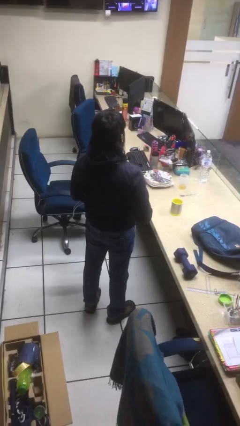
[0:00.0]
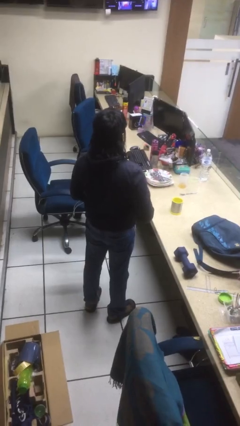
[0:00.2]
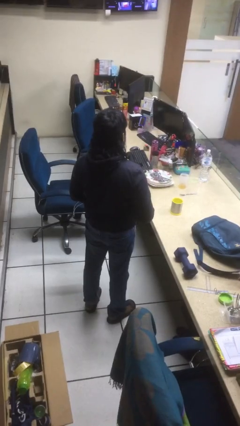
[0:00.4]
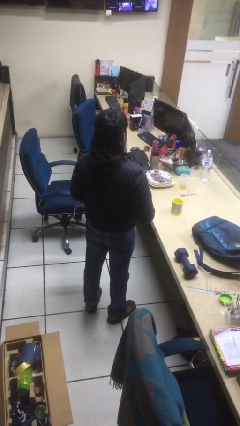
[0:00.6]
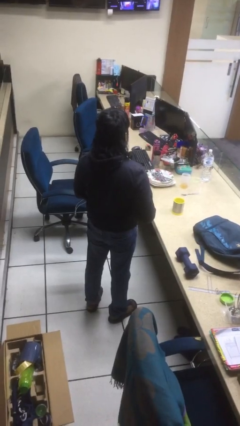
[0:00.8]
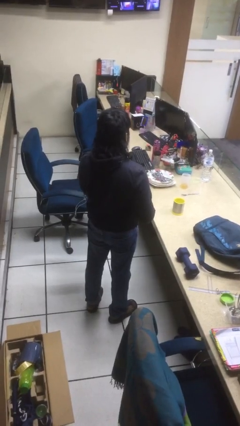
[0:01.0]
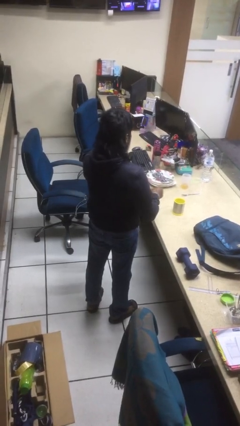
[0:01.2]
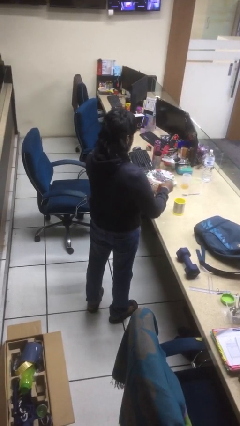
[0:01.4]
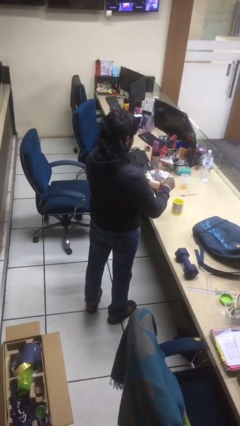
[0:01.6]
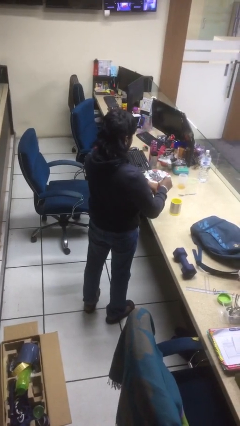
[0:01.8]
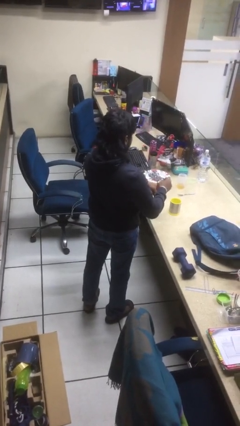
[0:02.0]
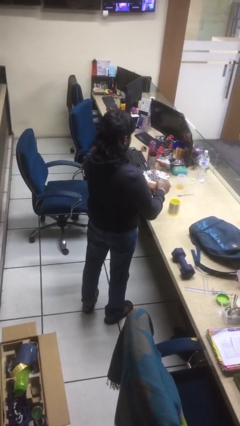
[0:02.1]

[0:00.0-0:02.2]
person opens beverage can

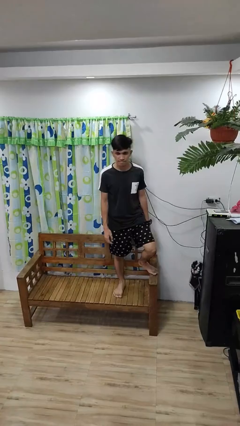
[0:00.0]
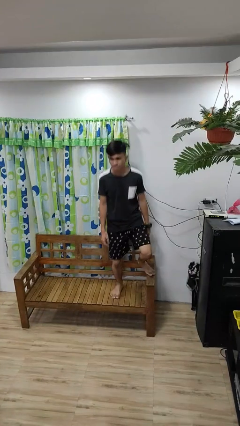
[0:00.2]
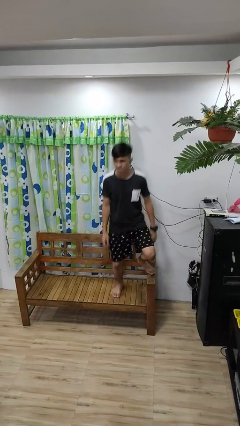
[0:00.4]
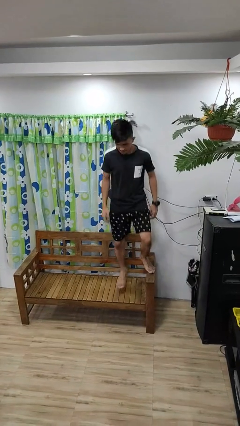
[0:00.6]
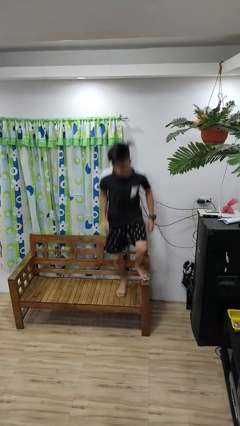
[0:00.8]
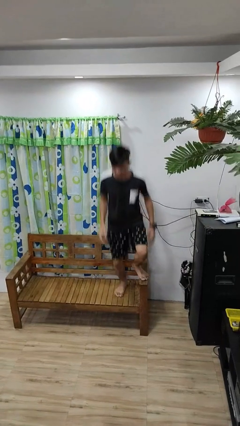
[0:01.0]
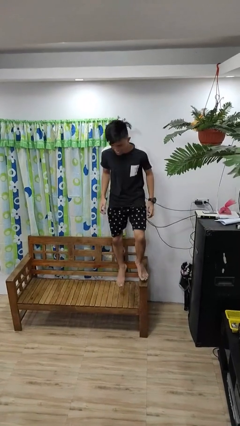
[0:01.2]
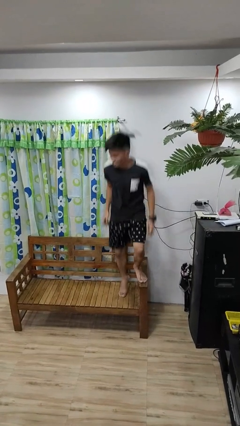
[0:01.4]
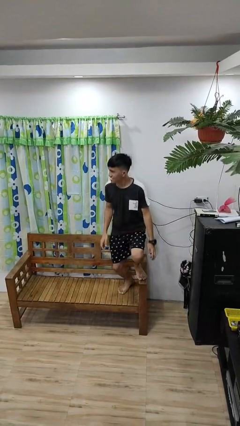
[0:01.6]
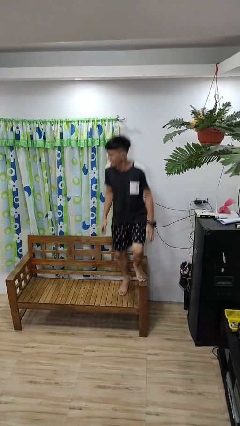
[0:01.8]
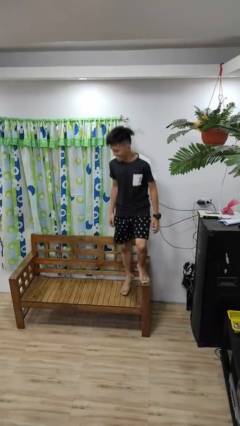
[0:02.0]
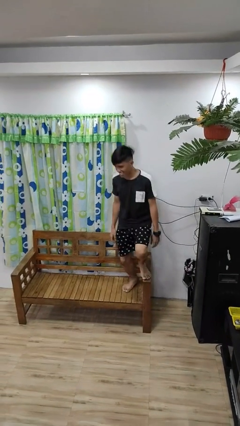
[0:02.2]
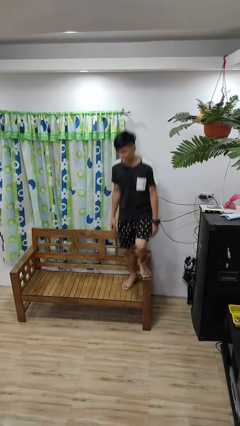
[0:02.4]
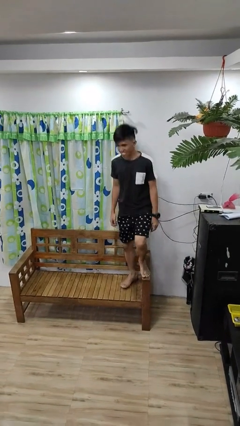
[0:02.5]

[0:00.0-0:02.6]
person jumps on couch

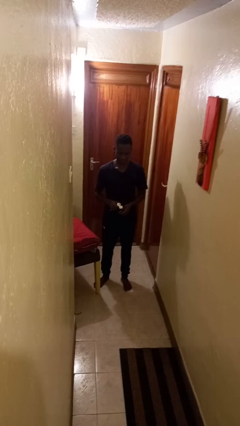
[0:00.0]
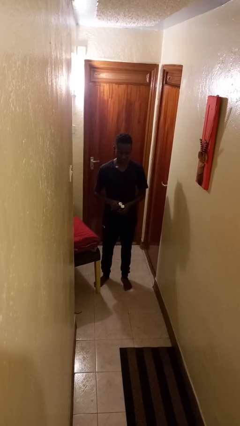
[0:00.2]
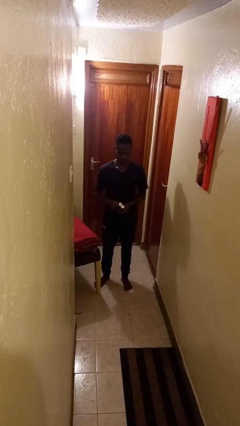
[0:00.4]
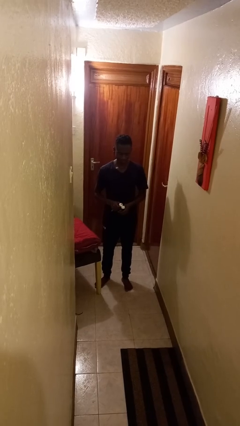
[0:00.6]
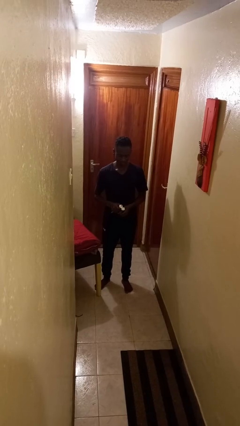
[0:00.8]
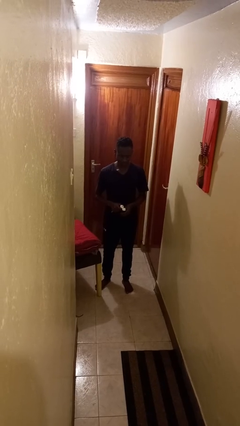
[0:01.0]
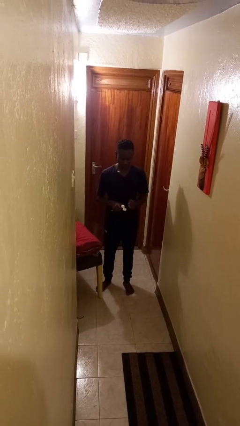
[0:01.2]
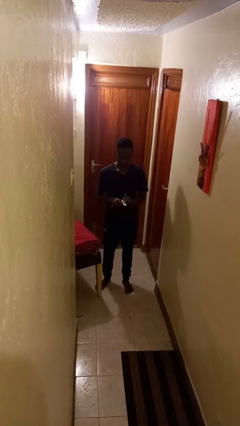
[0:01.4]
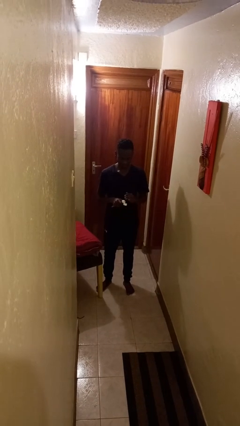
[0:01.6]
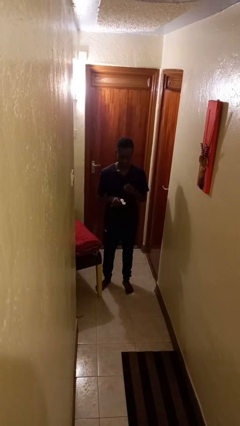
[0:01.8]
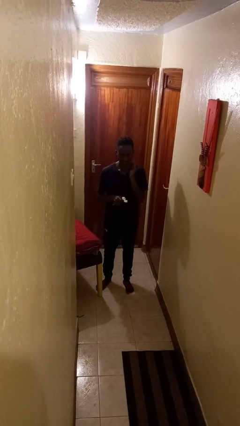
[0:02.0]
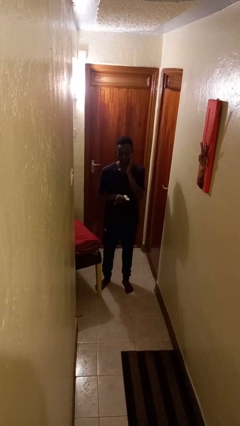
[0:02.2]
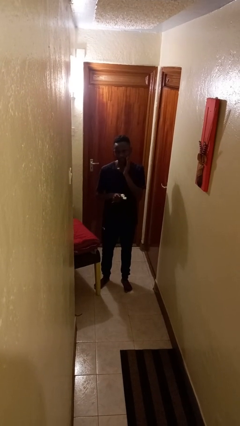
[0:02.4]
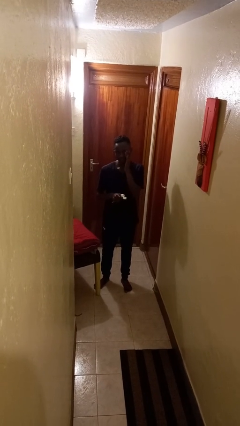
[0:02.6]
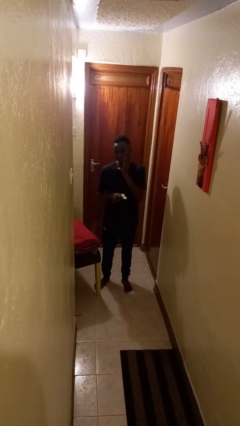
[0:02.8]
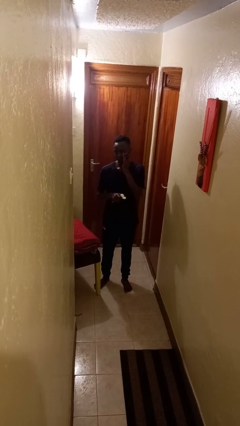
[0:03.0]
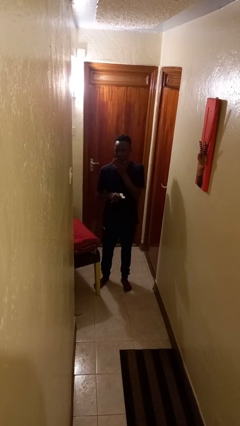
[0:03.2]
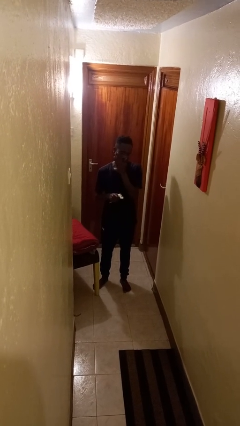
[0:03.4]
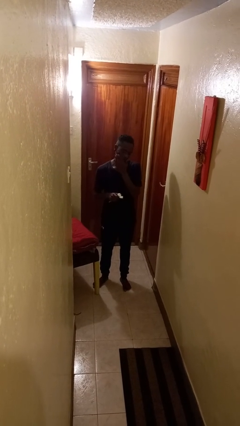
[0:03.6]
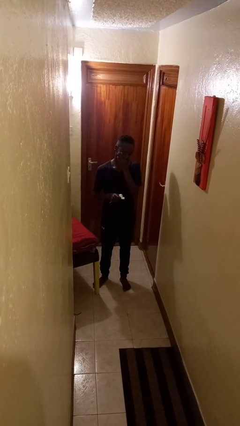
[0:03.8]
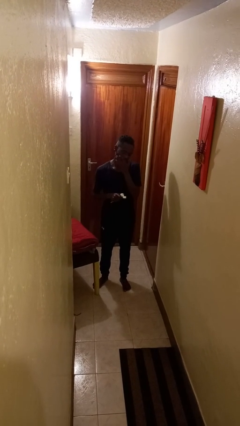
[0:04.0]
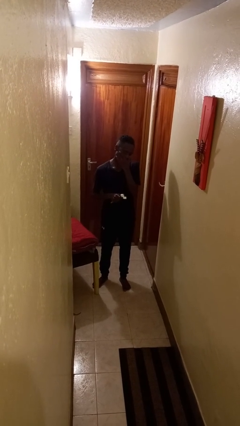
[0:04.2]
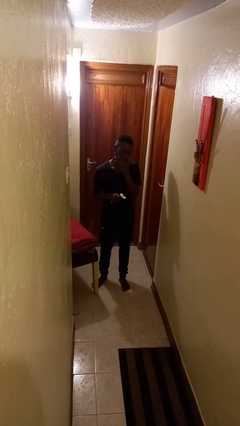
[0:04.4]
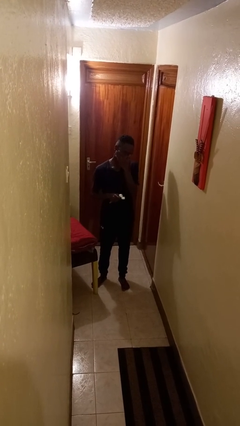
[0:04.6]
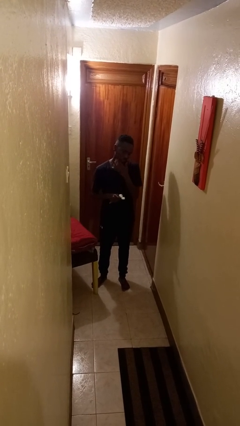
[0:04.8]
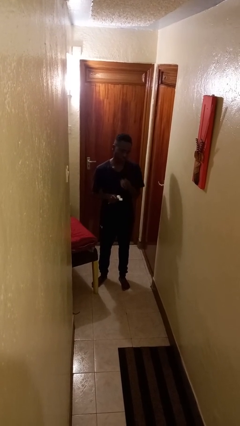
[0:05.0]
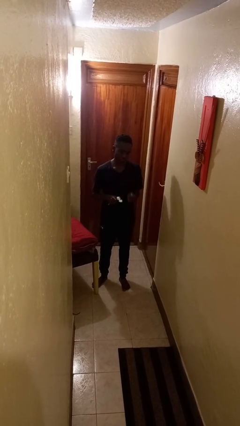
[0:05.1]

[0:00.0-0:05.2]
person applies sunscreen

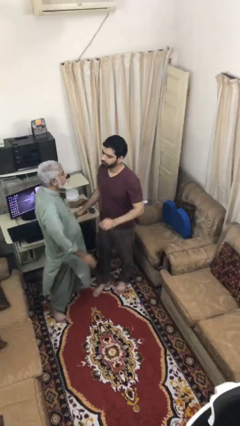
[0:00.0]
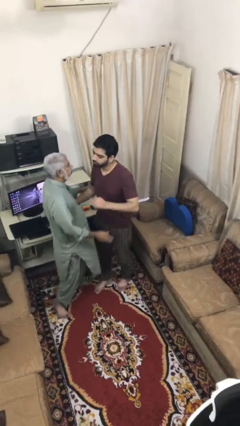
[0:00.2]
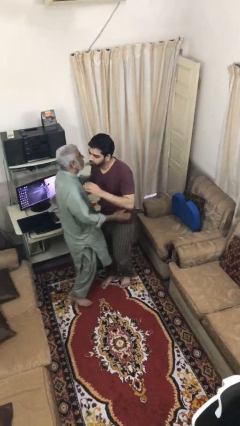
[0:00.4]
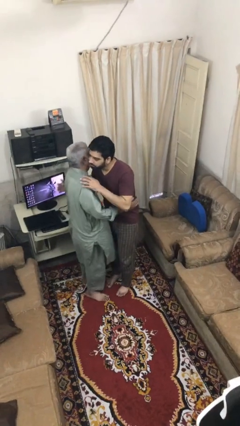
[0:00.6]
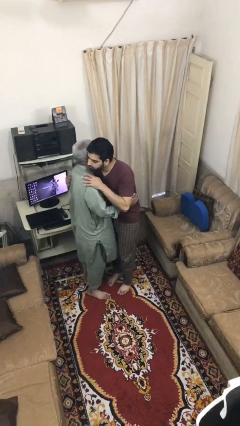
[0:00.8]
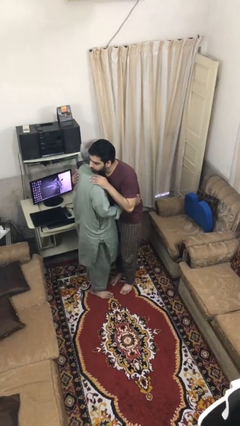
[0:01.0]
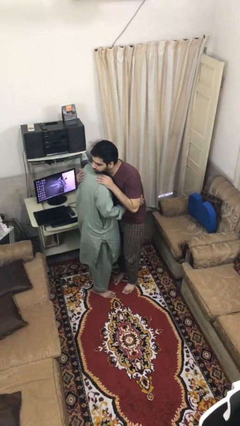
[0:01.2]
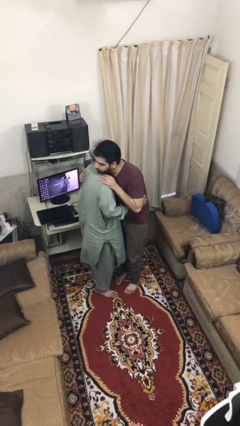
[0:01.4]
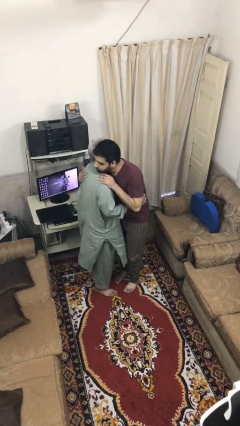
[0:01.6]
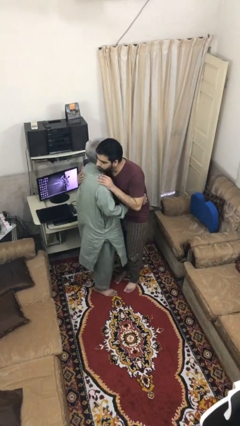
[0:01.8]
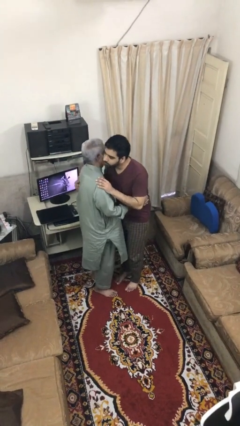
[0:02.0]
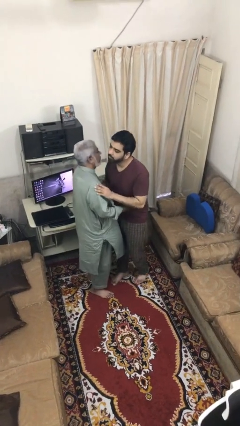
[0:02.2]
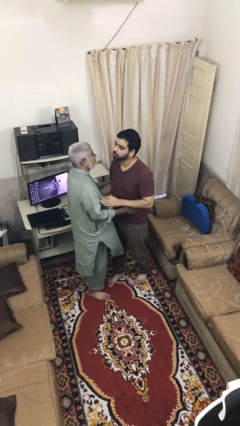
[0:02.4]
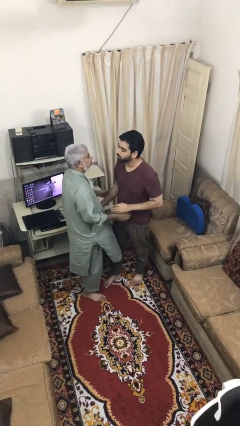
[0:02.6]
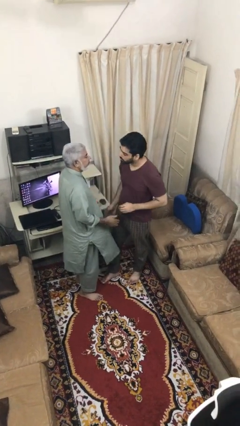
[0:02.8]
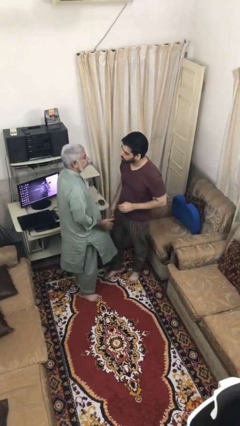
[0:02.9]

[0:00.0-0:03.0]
person embraces person

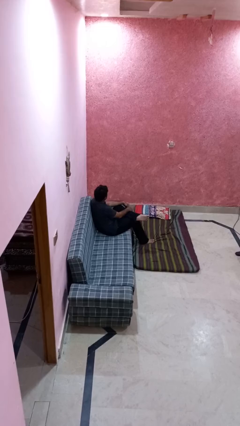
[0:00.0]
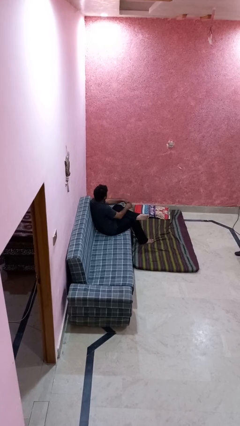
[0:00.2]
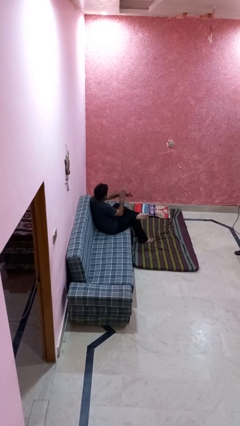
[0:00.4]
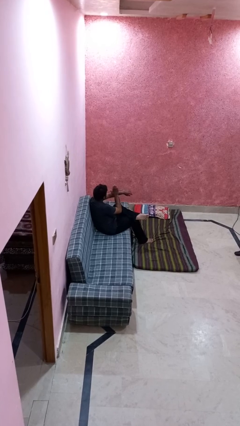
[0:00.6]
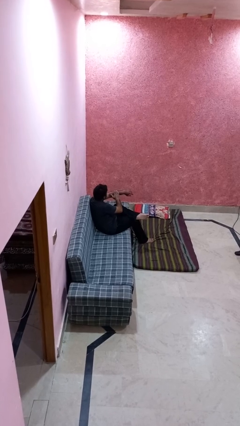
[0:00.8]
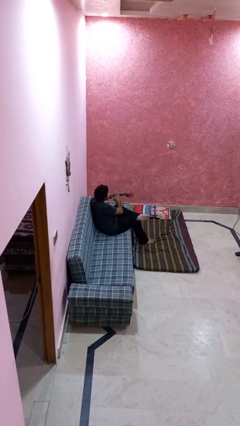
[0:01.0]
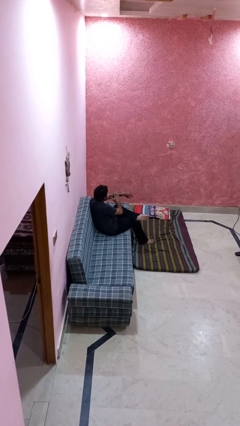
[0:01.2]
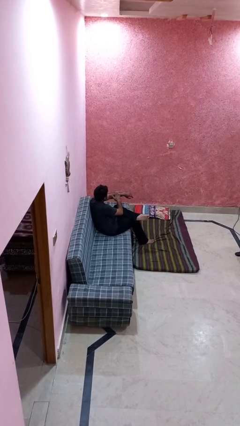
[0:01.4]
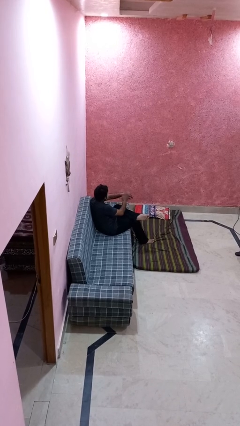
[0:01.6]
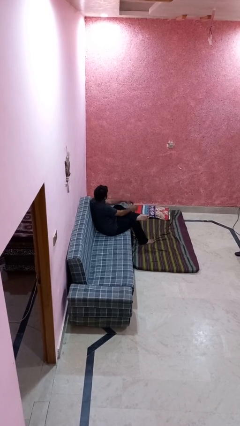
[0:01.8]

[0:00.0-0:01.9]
person swats bug

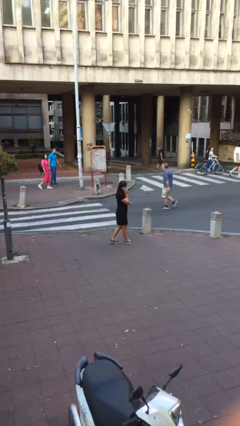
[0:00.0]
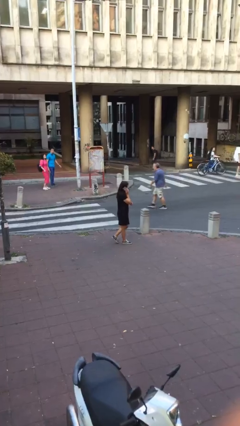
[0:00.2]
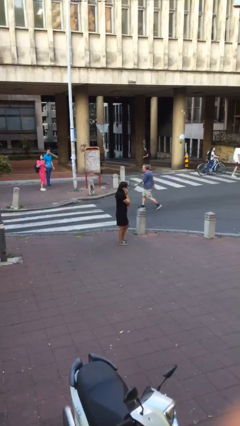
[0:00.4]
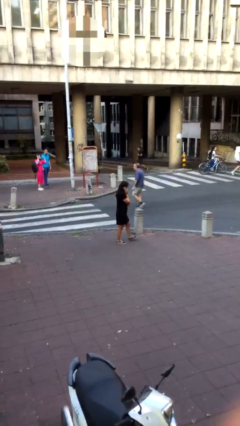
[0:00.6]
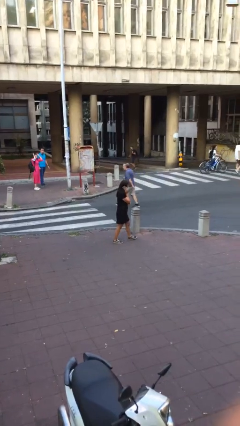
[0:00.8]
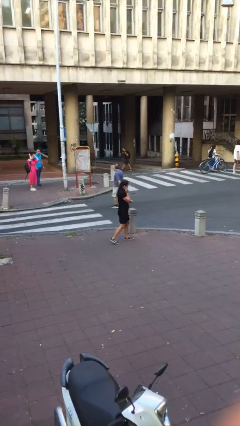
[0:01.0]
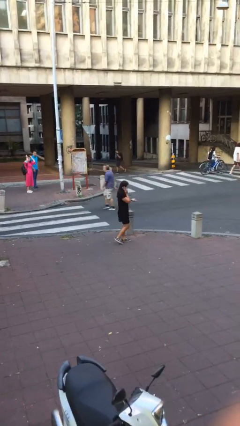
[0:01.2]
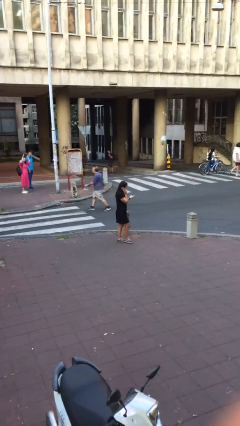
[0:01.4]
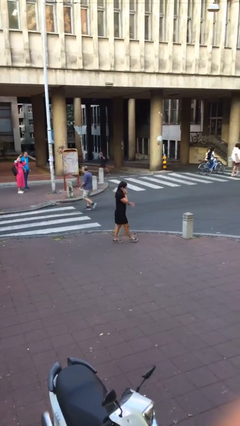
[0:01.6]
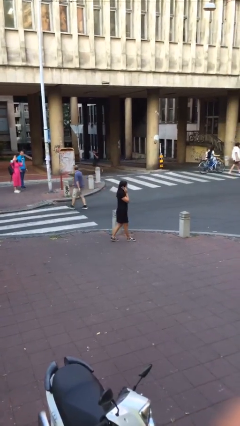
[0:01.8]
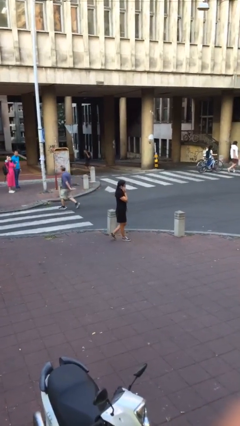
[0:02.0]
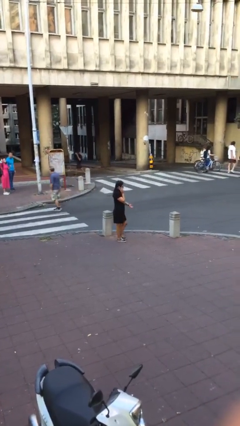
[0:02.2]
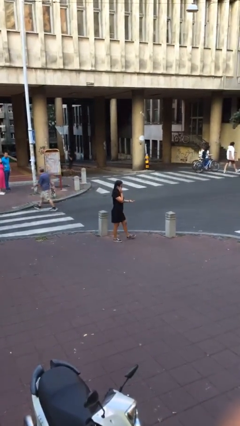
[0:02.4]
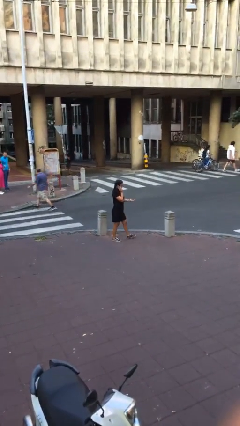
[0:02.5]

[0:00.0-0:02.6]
person talks on phone

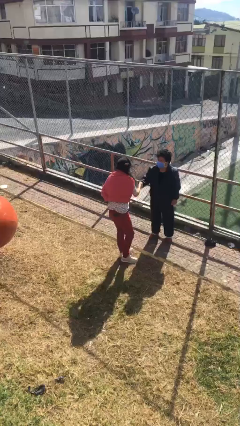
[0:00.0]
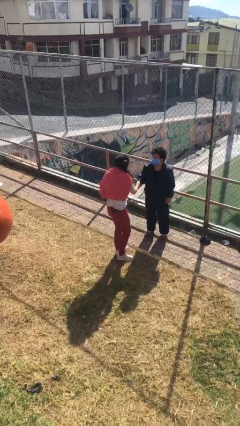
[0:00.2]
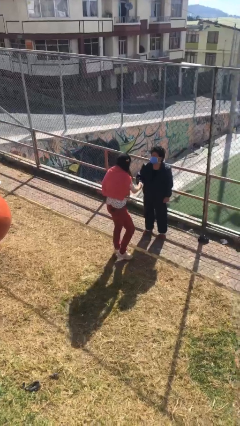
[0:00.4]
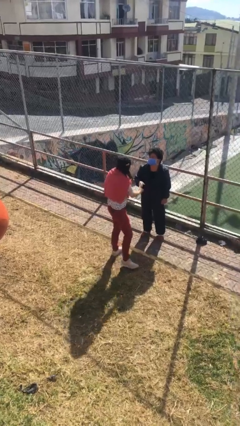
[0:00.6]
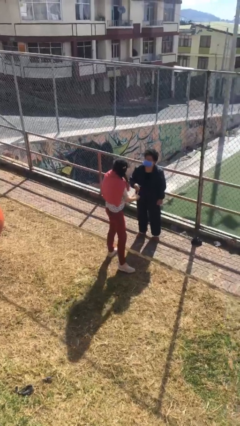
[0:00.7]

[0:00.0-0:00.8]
person shakes hand
